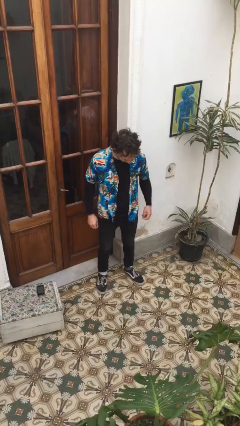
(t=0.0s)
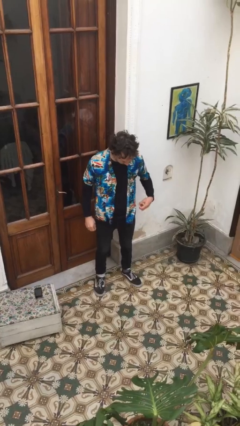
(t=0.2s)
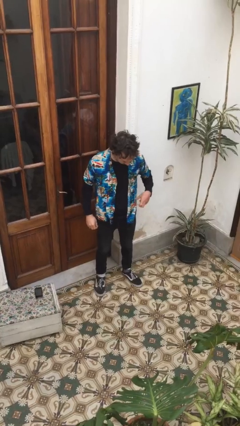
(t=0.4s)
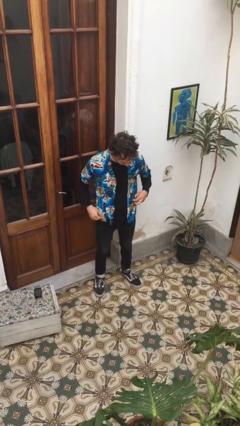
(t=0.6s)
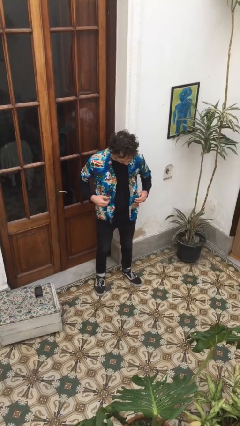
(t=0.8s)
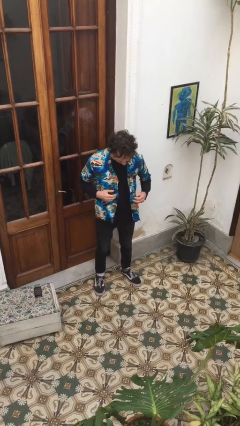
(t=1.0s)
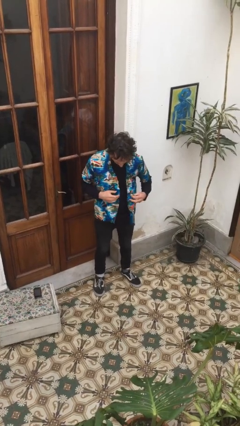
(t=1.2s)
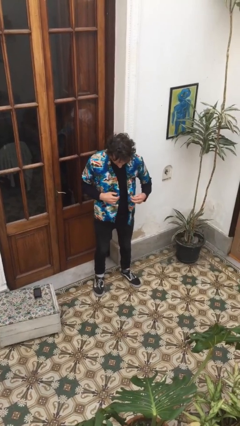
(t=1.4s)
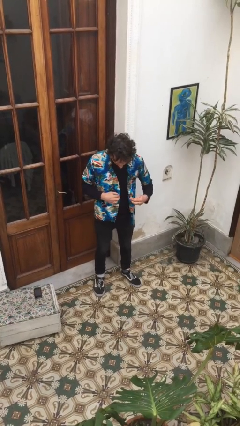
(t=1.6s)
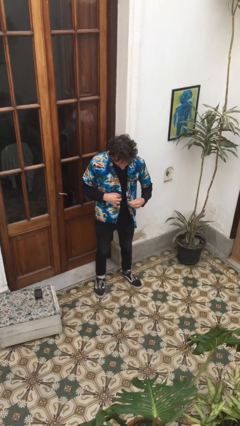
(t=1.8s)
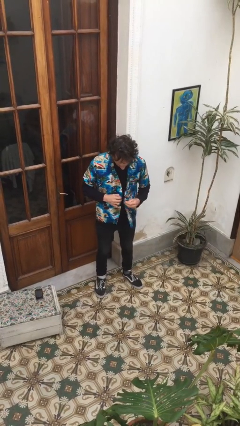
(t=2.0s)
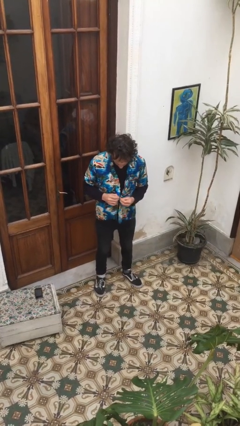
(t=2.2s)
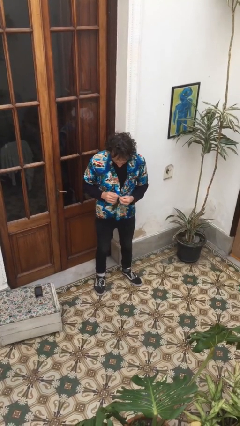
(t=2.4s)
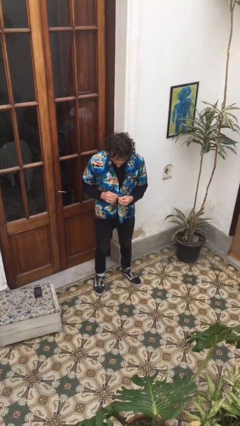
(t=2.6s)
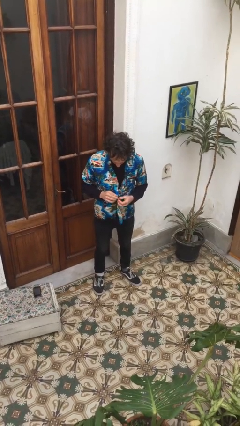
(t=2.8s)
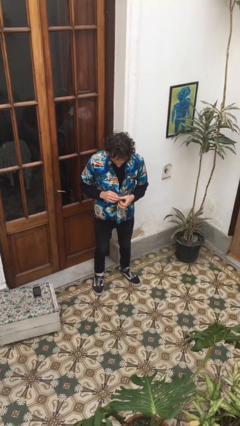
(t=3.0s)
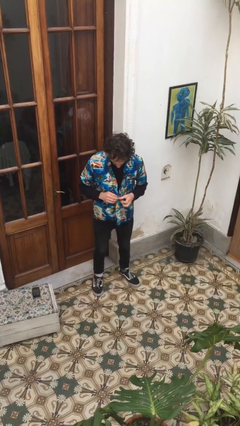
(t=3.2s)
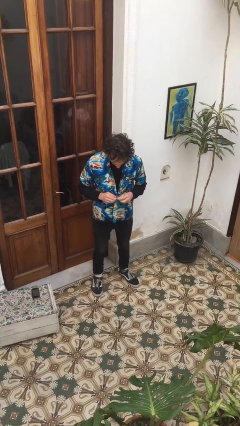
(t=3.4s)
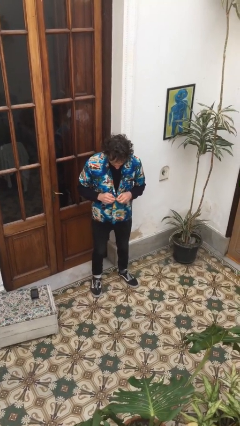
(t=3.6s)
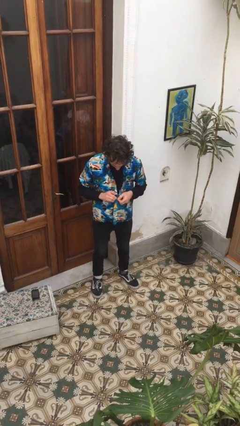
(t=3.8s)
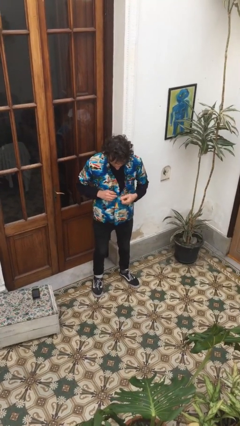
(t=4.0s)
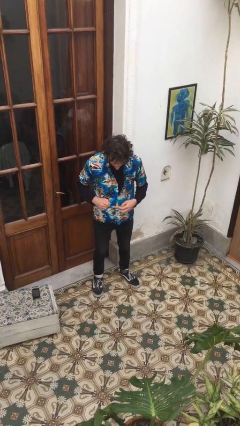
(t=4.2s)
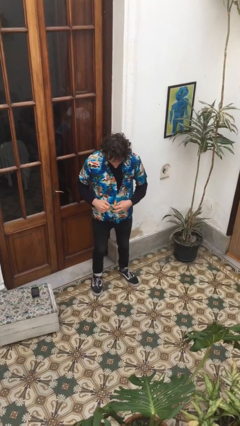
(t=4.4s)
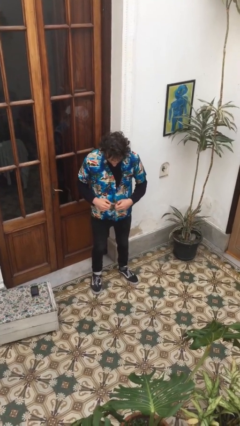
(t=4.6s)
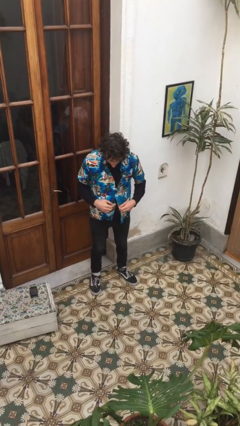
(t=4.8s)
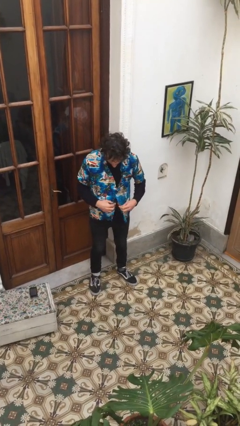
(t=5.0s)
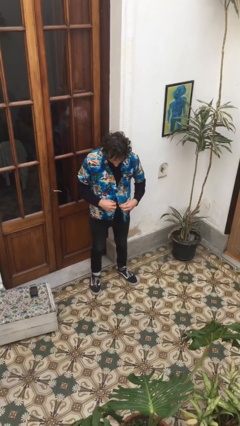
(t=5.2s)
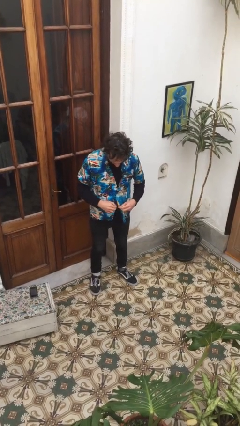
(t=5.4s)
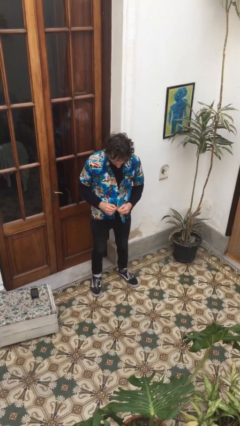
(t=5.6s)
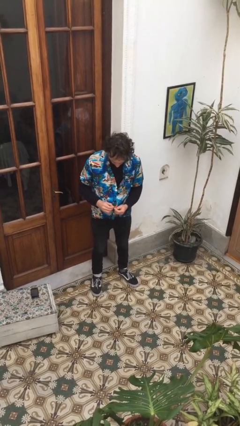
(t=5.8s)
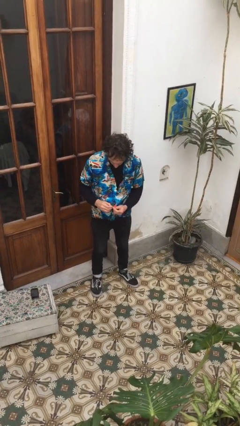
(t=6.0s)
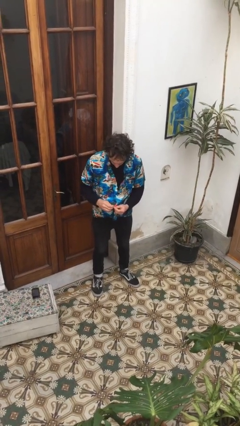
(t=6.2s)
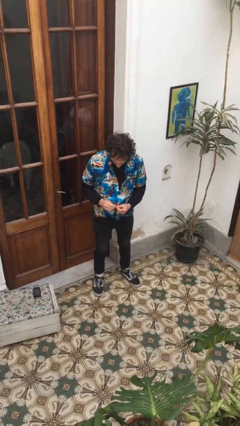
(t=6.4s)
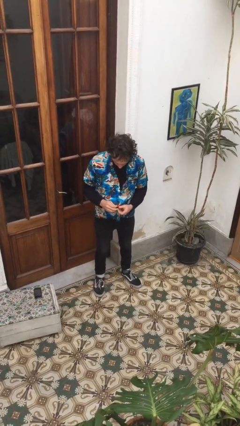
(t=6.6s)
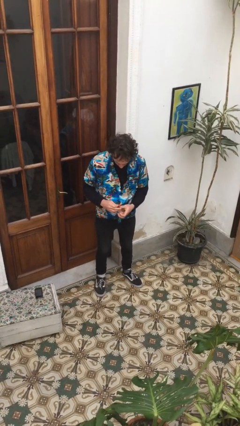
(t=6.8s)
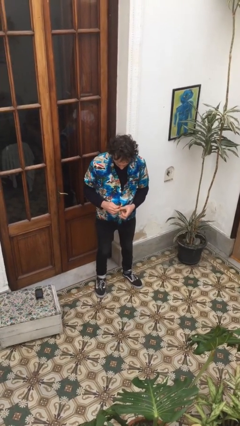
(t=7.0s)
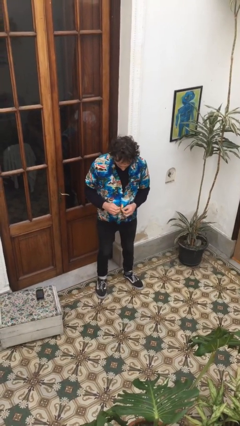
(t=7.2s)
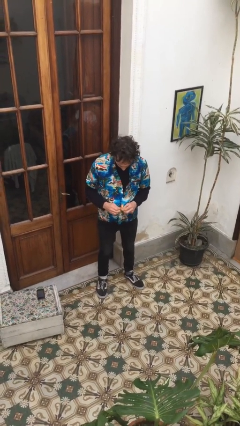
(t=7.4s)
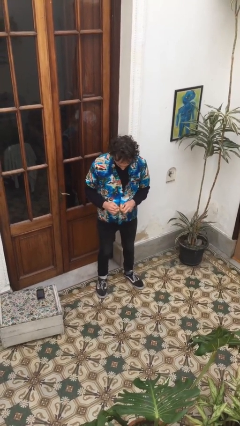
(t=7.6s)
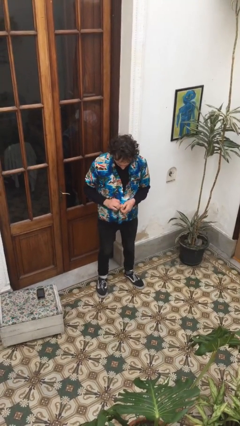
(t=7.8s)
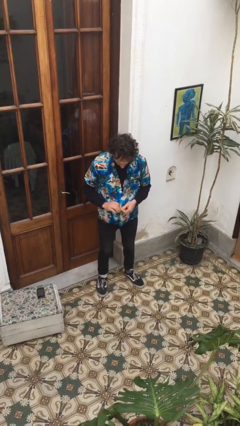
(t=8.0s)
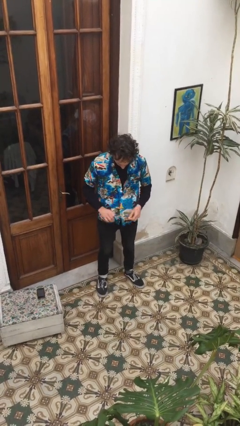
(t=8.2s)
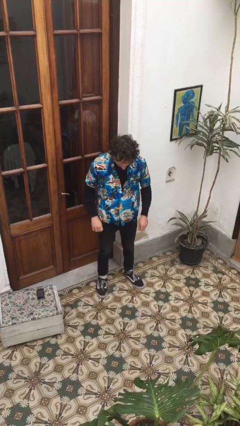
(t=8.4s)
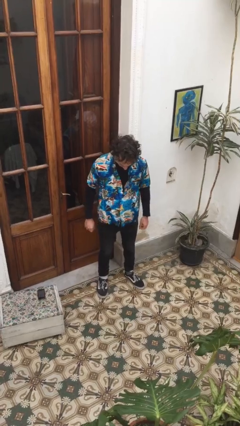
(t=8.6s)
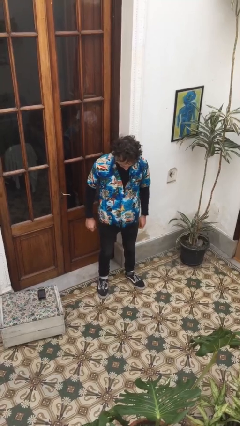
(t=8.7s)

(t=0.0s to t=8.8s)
person buttons shirt

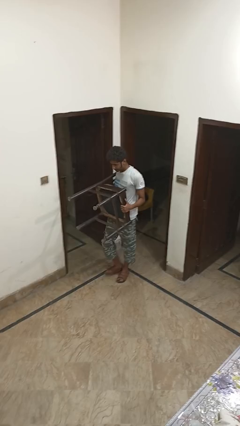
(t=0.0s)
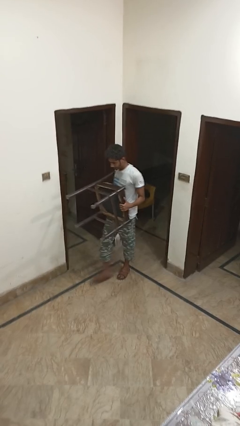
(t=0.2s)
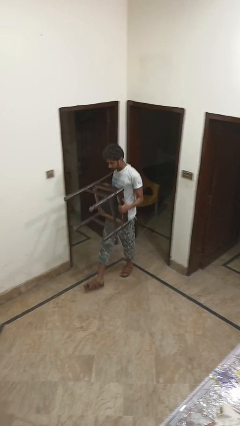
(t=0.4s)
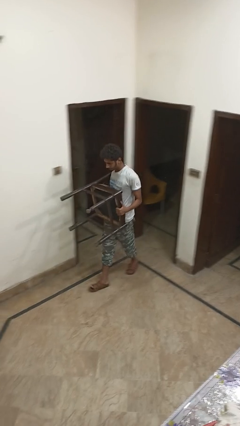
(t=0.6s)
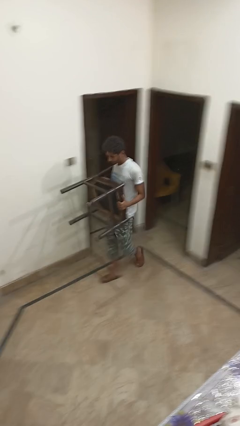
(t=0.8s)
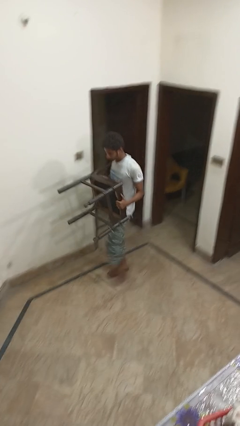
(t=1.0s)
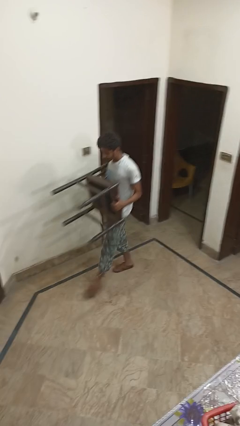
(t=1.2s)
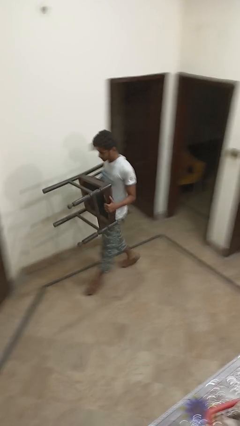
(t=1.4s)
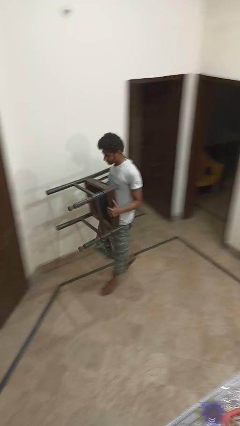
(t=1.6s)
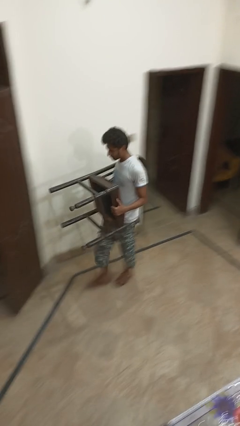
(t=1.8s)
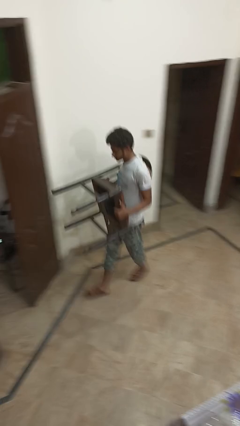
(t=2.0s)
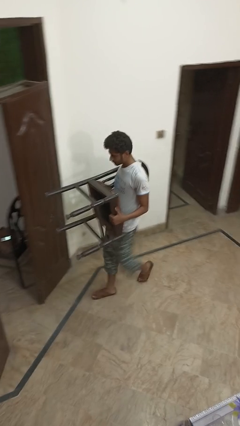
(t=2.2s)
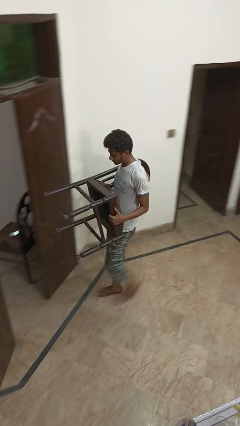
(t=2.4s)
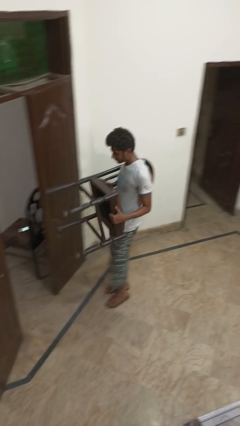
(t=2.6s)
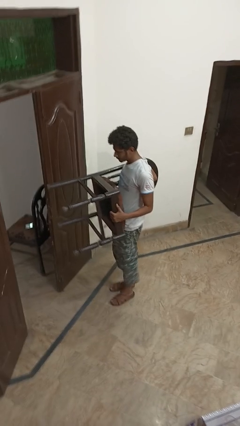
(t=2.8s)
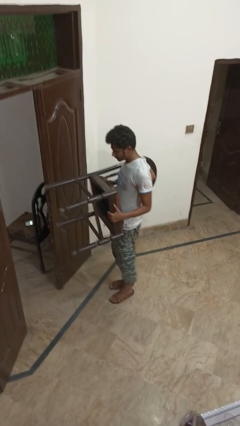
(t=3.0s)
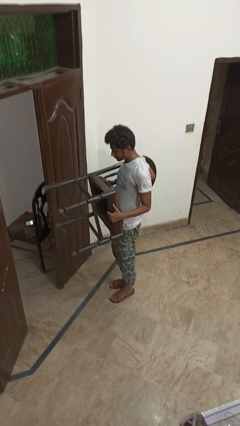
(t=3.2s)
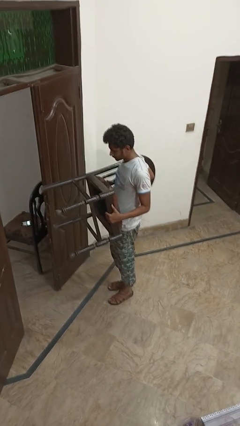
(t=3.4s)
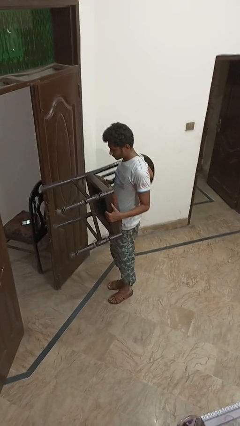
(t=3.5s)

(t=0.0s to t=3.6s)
person carries furniture

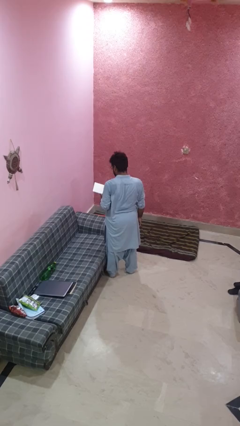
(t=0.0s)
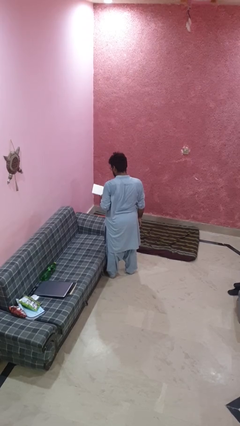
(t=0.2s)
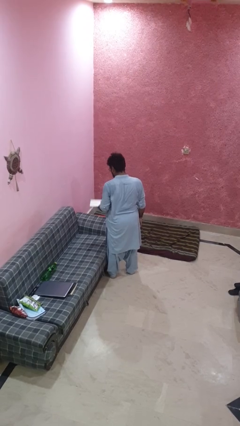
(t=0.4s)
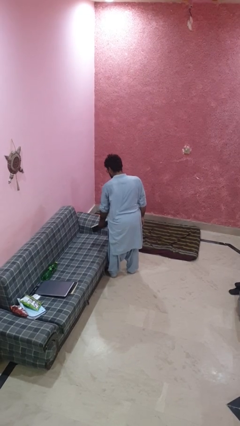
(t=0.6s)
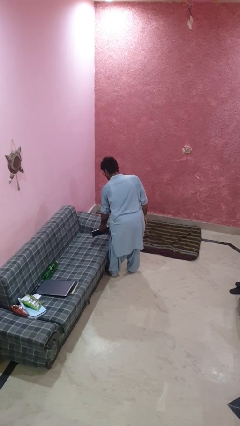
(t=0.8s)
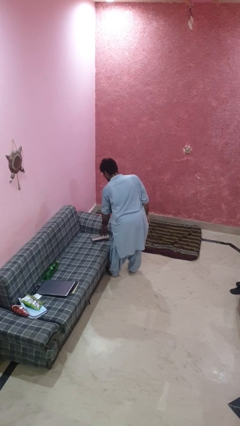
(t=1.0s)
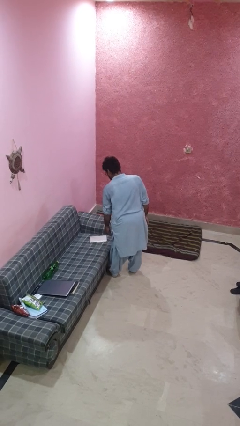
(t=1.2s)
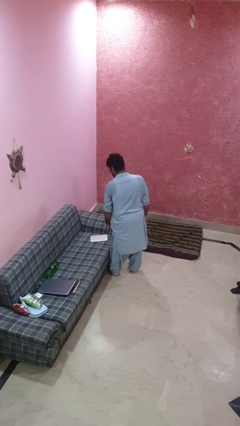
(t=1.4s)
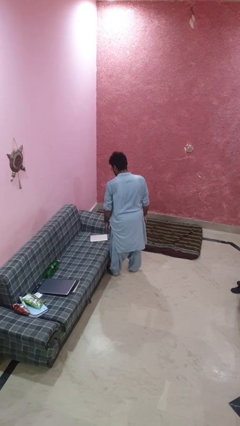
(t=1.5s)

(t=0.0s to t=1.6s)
person puts down object on couch

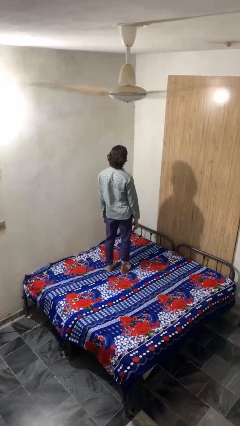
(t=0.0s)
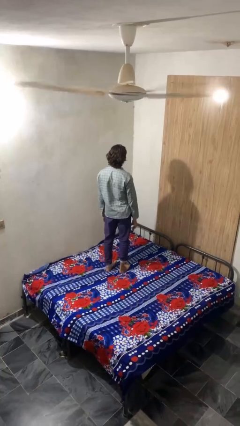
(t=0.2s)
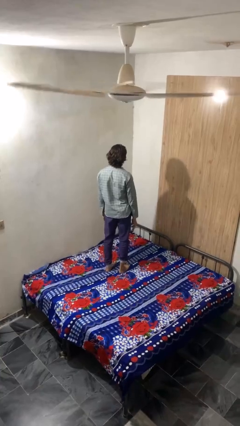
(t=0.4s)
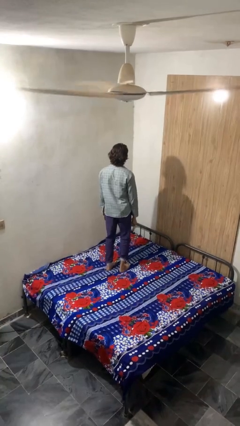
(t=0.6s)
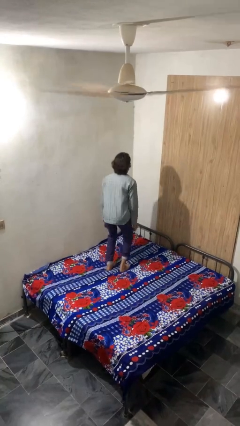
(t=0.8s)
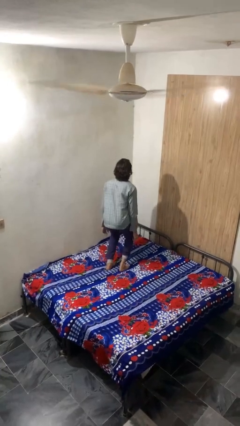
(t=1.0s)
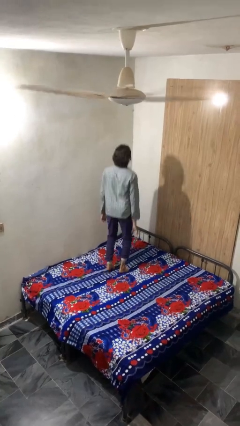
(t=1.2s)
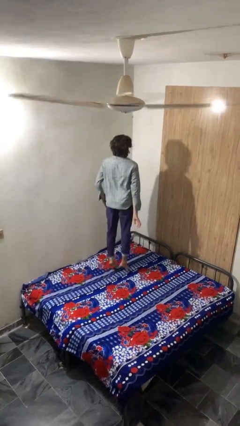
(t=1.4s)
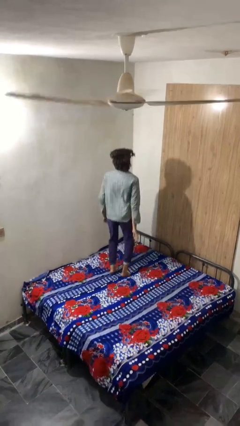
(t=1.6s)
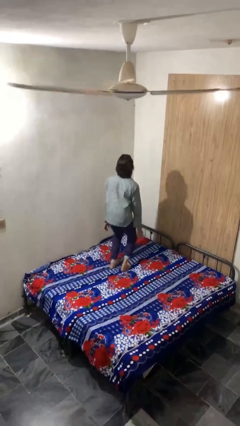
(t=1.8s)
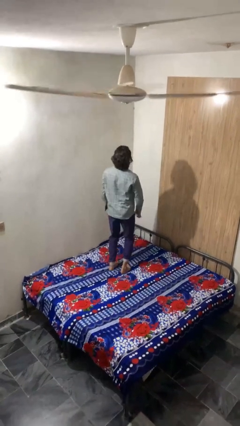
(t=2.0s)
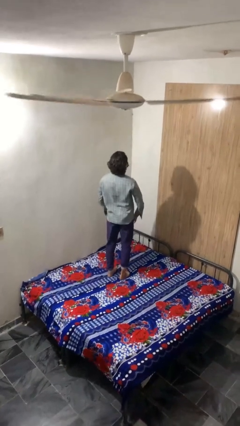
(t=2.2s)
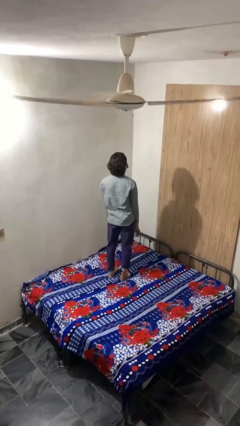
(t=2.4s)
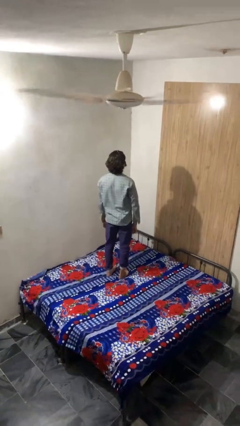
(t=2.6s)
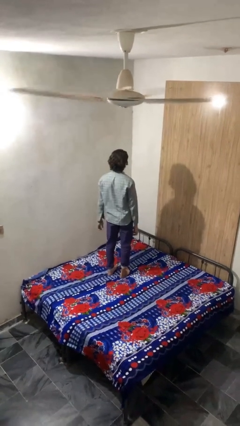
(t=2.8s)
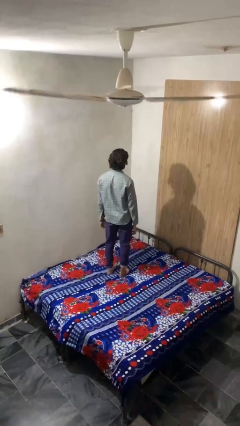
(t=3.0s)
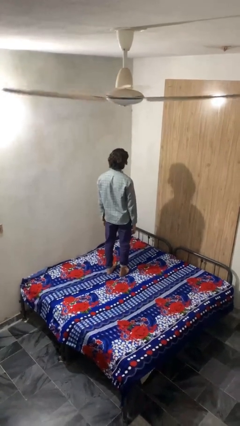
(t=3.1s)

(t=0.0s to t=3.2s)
person jumps on bed
